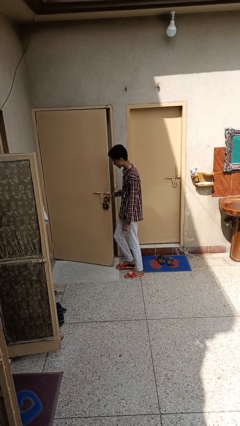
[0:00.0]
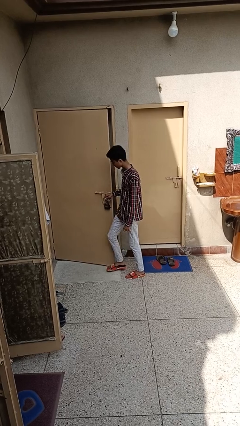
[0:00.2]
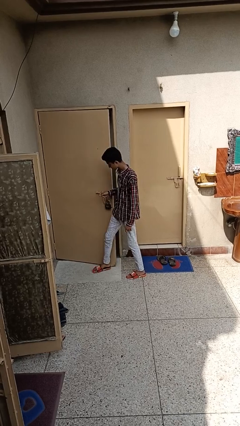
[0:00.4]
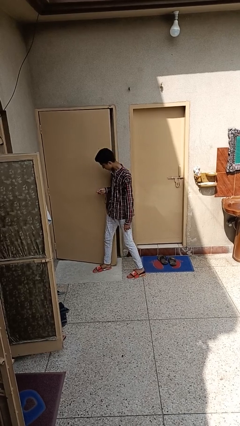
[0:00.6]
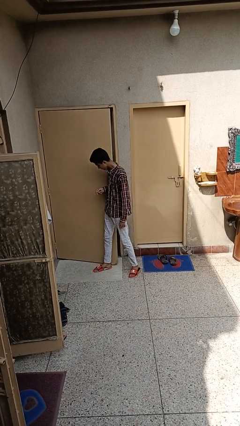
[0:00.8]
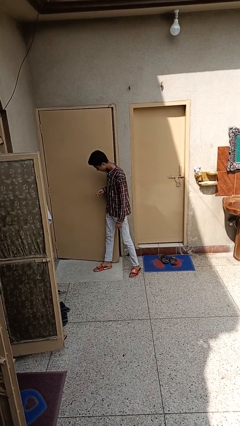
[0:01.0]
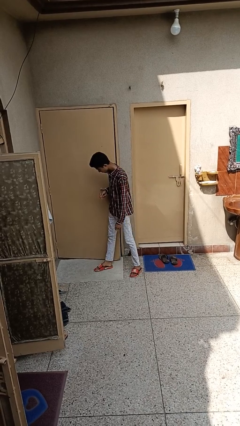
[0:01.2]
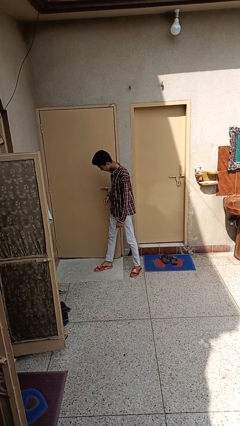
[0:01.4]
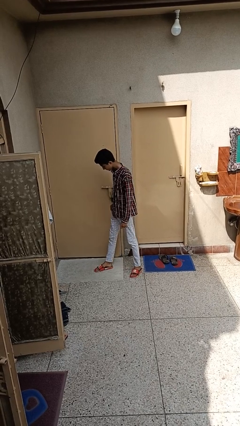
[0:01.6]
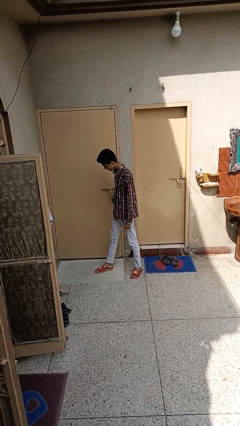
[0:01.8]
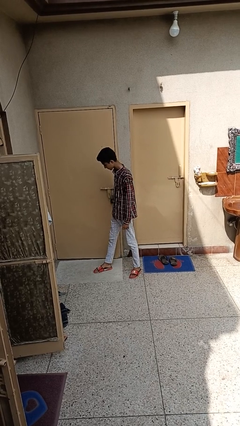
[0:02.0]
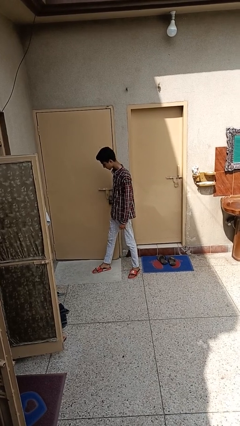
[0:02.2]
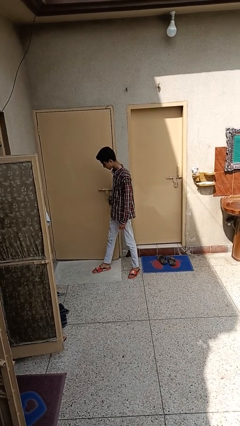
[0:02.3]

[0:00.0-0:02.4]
person closes door with hip

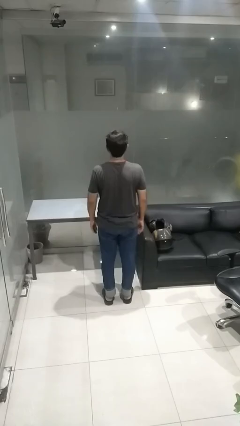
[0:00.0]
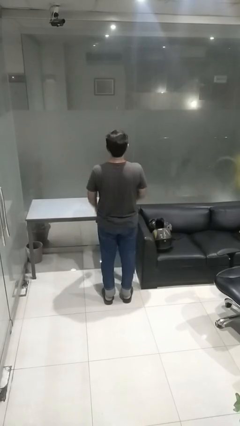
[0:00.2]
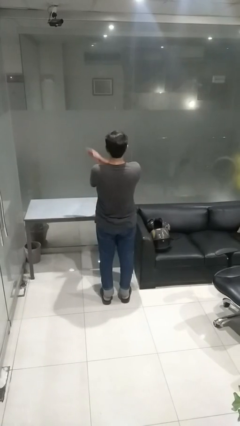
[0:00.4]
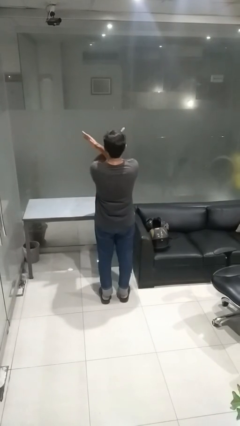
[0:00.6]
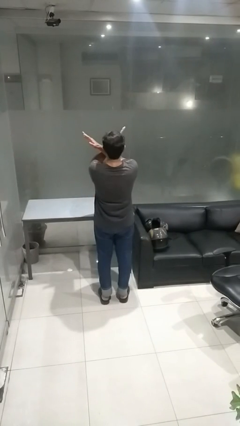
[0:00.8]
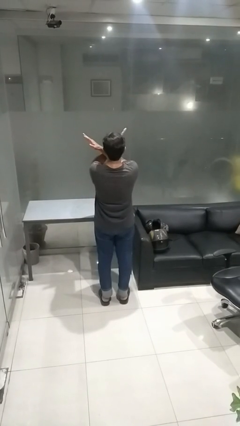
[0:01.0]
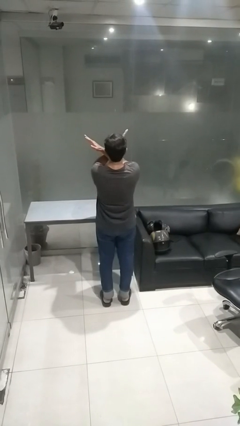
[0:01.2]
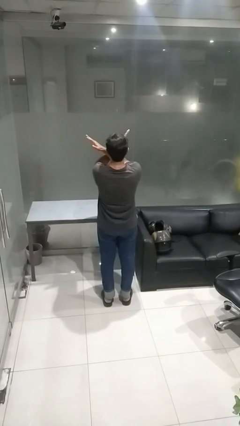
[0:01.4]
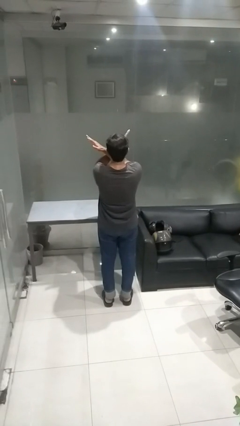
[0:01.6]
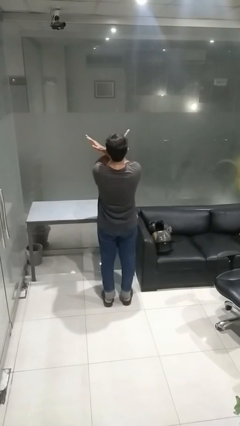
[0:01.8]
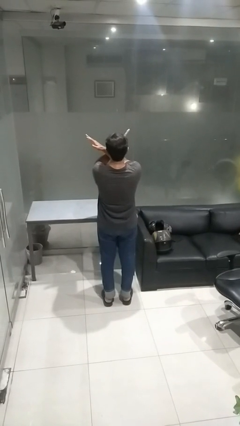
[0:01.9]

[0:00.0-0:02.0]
person gestures arms x

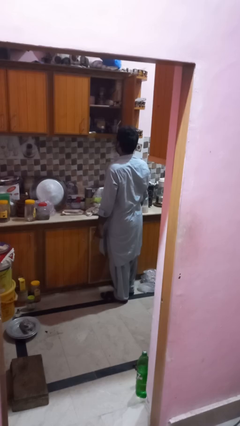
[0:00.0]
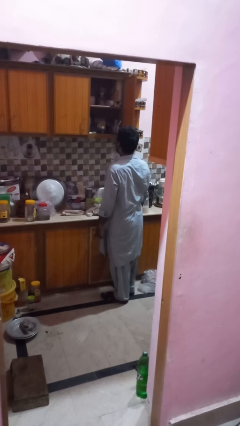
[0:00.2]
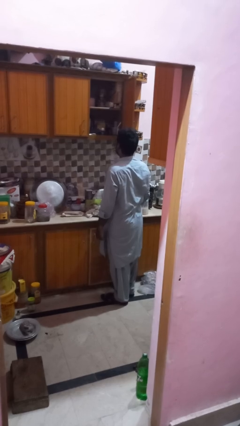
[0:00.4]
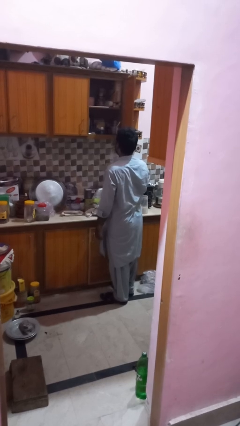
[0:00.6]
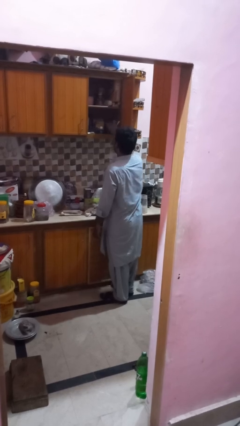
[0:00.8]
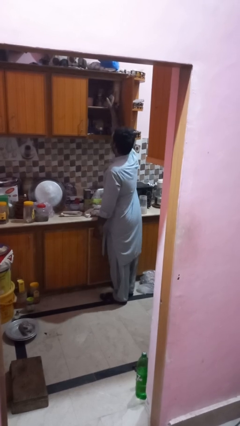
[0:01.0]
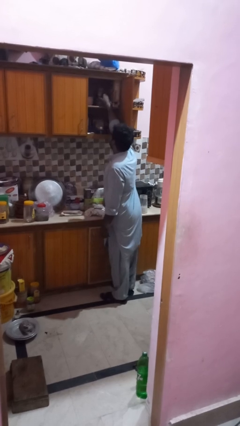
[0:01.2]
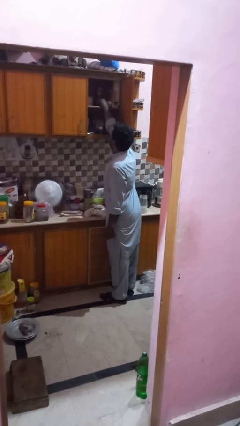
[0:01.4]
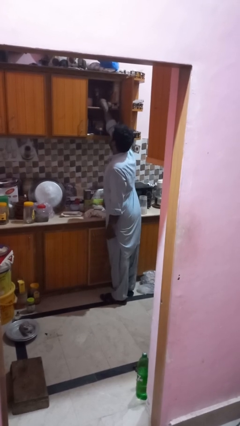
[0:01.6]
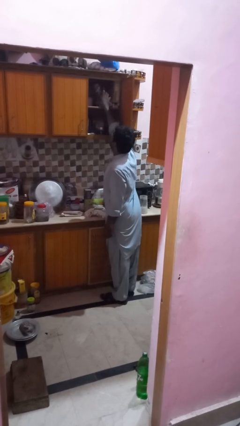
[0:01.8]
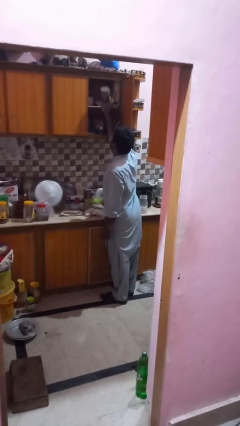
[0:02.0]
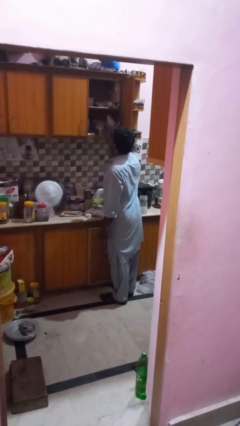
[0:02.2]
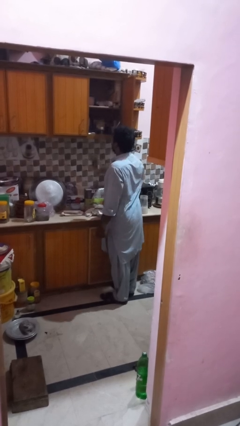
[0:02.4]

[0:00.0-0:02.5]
person takes object from cabinet

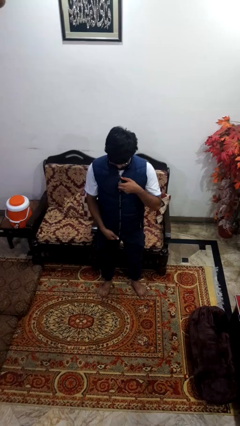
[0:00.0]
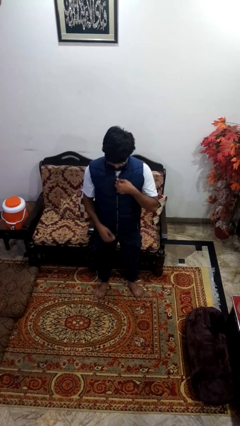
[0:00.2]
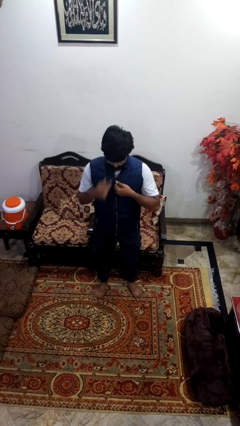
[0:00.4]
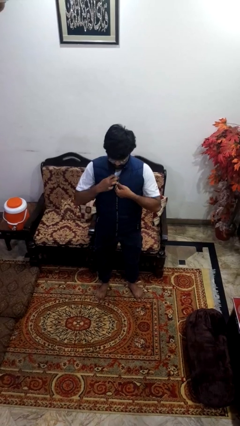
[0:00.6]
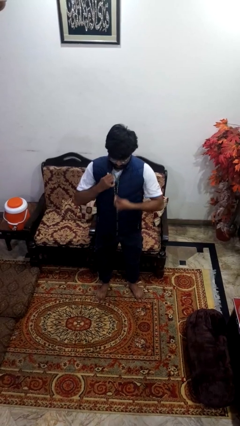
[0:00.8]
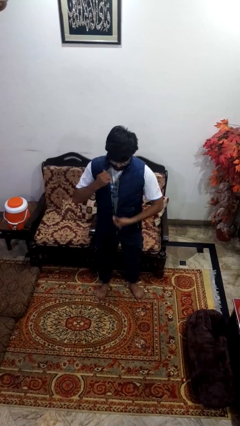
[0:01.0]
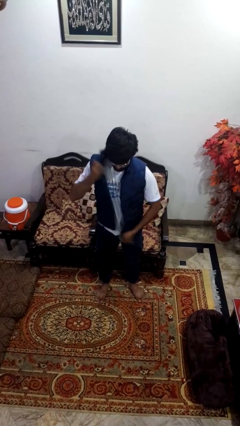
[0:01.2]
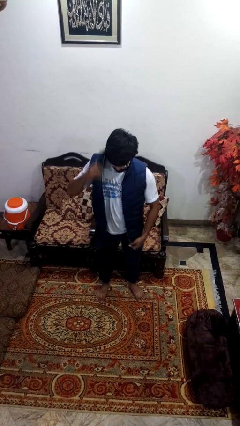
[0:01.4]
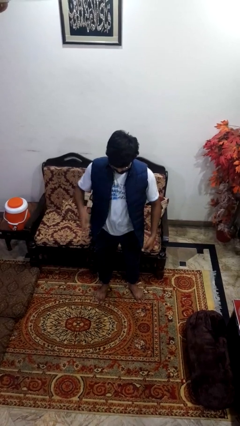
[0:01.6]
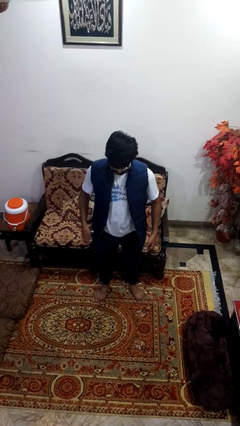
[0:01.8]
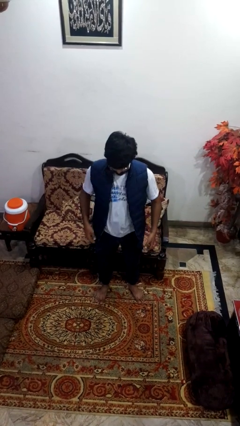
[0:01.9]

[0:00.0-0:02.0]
person unzips jacket

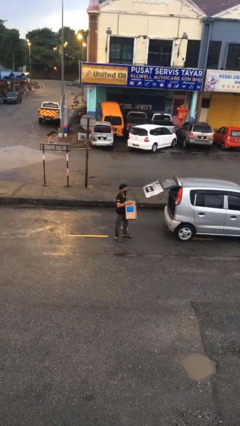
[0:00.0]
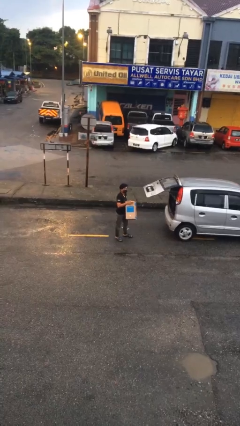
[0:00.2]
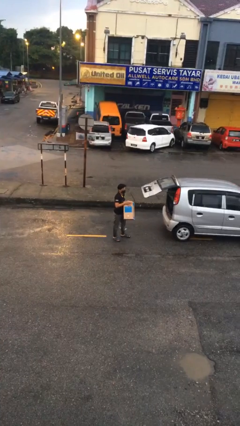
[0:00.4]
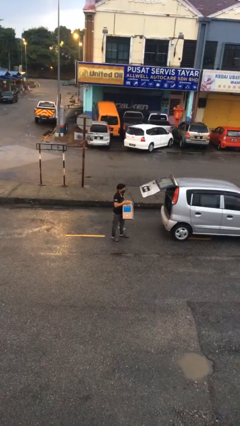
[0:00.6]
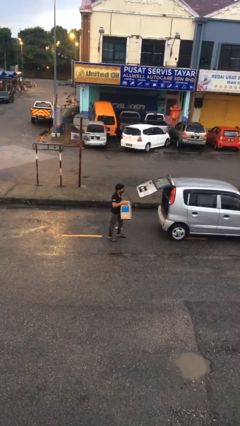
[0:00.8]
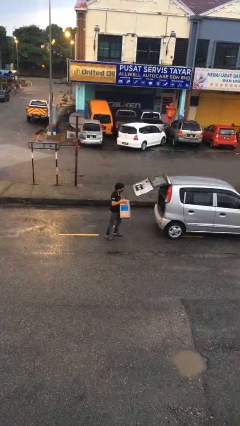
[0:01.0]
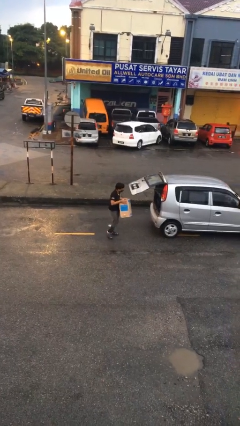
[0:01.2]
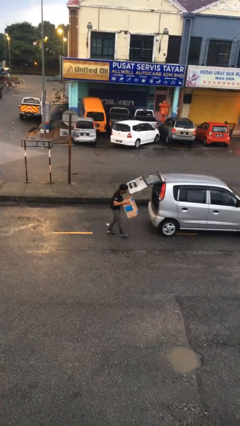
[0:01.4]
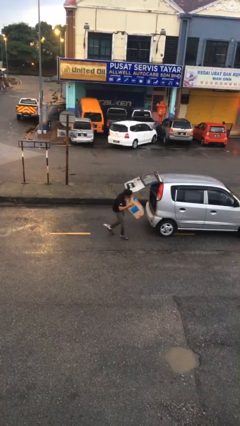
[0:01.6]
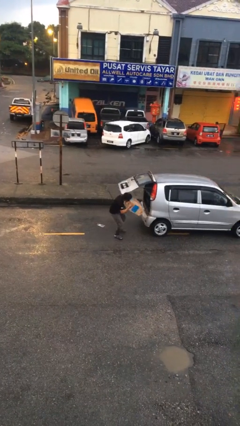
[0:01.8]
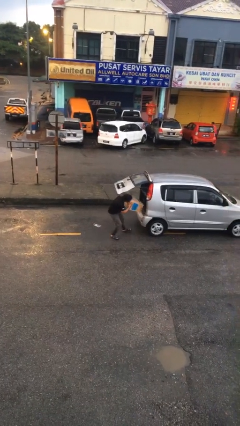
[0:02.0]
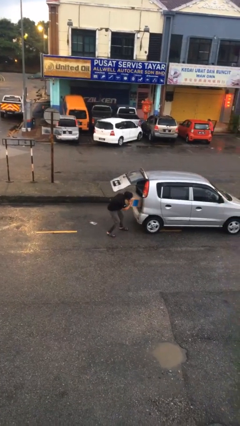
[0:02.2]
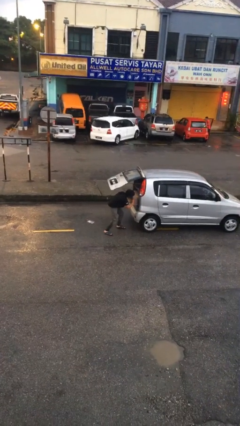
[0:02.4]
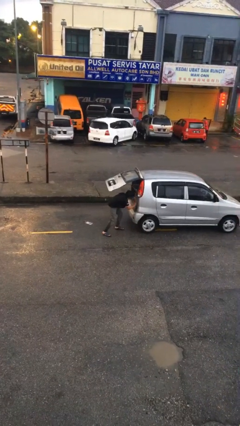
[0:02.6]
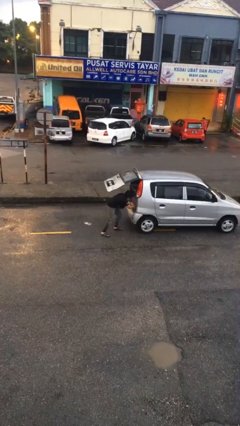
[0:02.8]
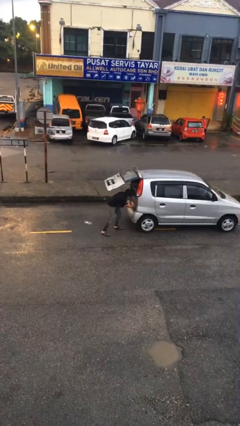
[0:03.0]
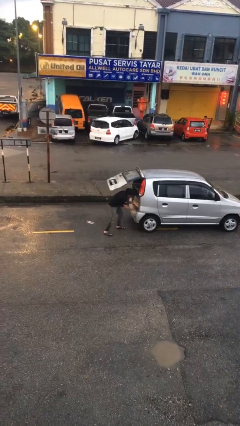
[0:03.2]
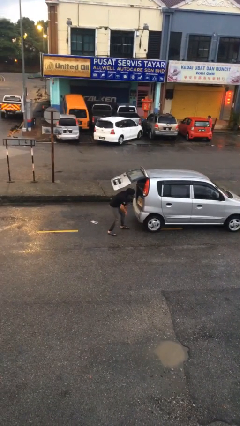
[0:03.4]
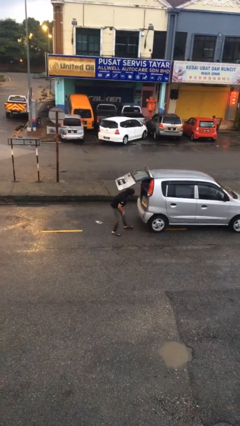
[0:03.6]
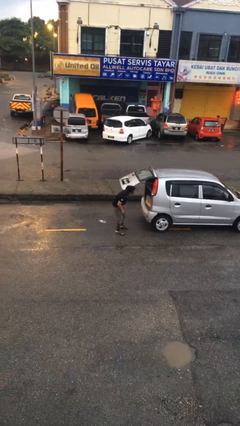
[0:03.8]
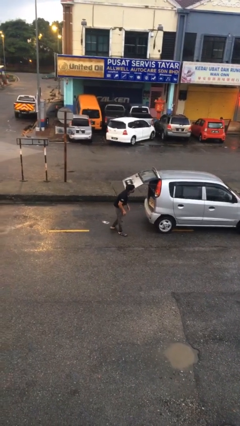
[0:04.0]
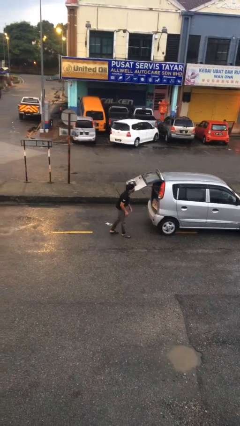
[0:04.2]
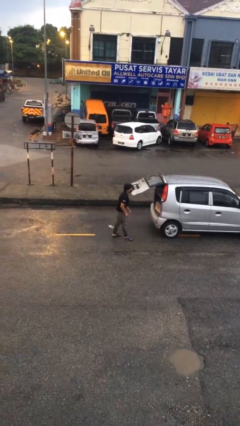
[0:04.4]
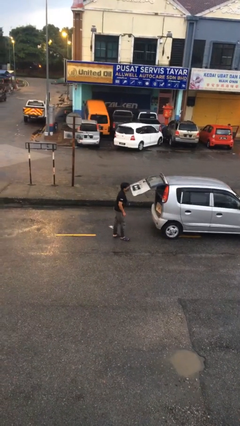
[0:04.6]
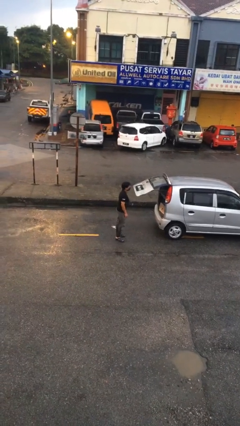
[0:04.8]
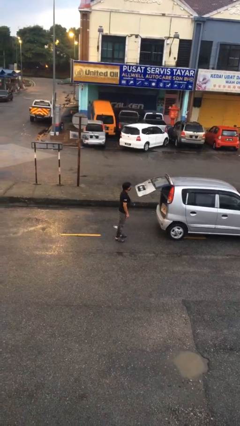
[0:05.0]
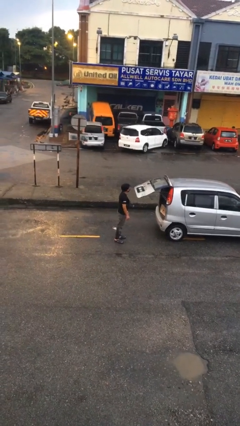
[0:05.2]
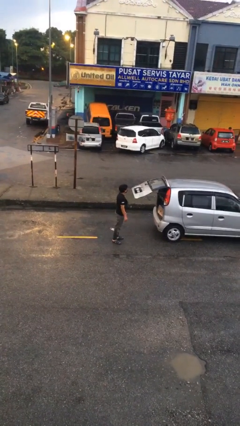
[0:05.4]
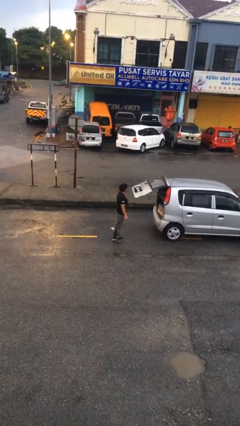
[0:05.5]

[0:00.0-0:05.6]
person loads car

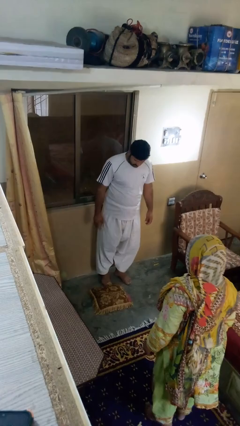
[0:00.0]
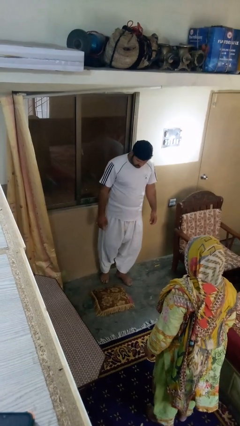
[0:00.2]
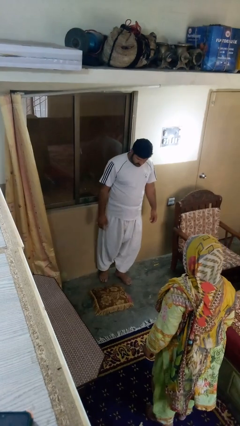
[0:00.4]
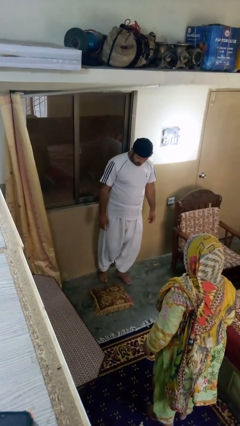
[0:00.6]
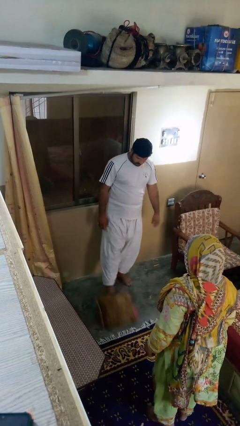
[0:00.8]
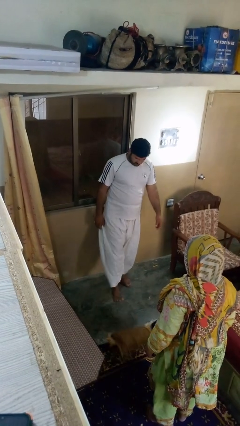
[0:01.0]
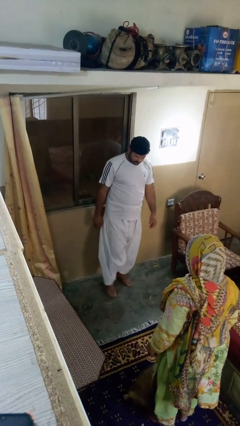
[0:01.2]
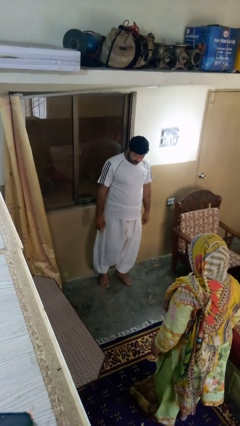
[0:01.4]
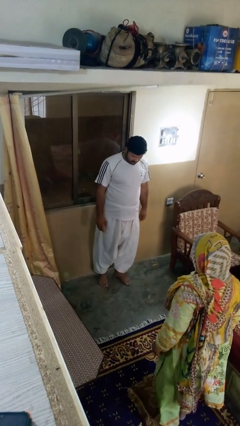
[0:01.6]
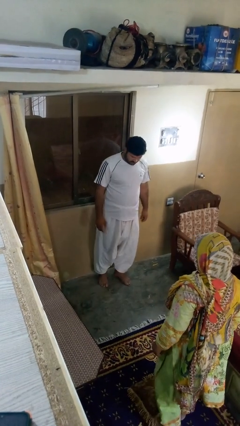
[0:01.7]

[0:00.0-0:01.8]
person kicks object to person

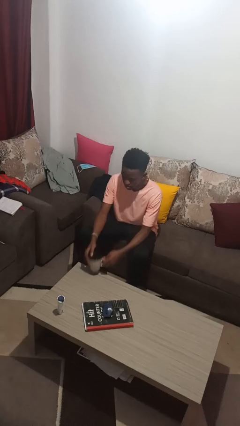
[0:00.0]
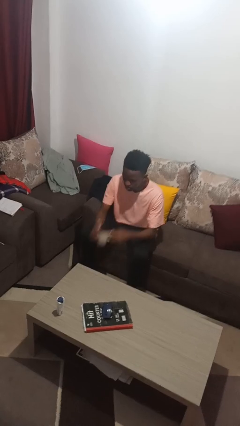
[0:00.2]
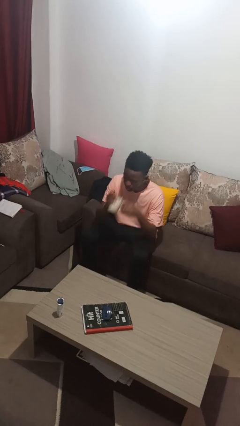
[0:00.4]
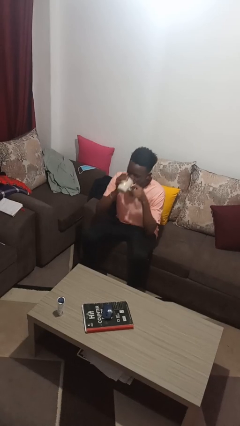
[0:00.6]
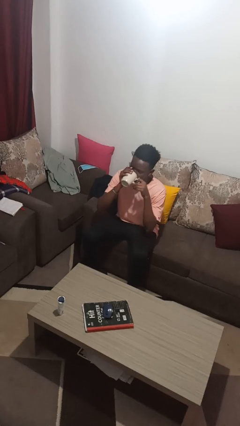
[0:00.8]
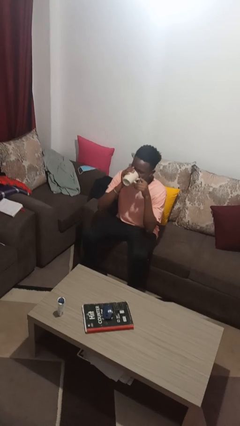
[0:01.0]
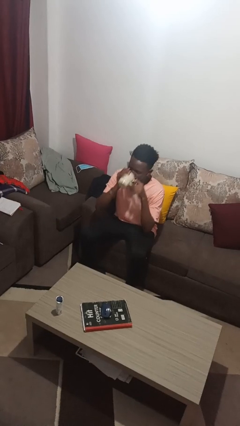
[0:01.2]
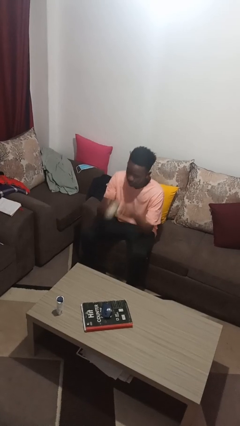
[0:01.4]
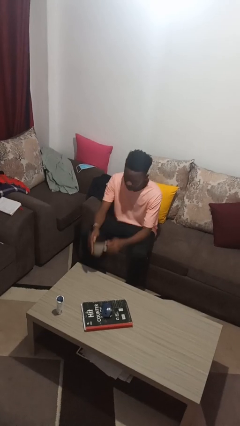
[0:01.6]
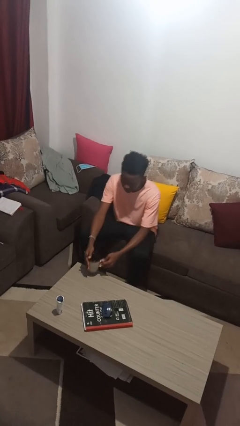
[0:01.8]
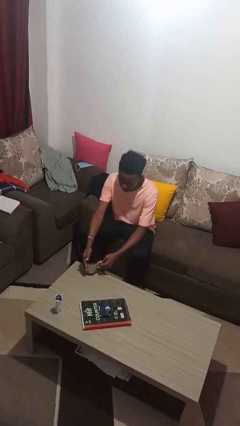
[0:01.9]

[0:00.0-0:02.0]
person drinks from mug
